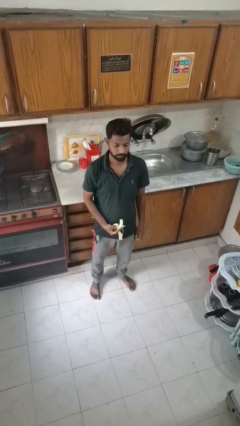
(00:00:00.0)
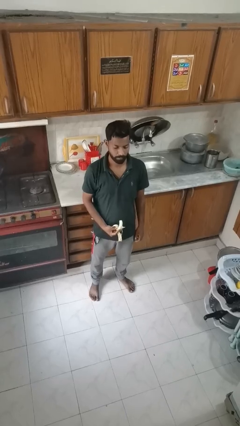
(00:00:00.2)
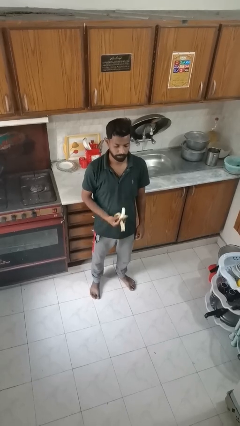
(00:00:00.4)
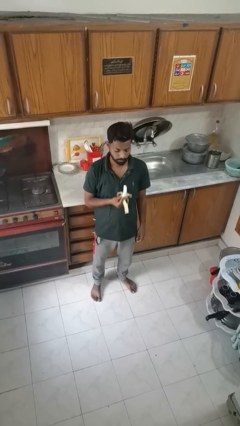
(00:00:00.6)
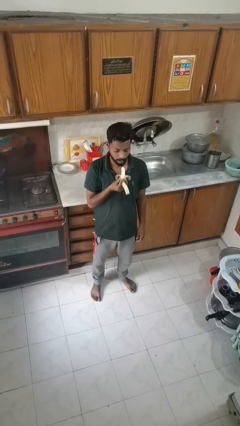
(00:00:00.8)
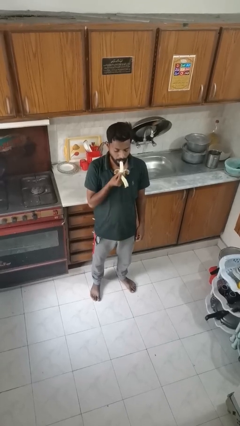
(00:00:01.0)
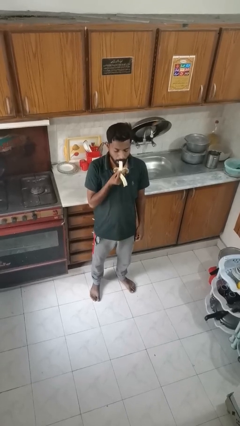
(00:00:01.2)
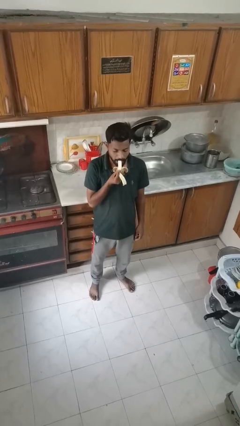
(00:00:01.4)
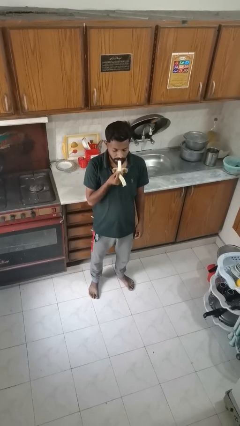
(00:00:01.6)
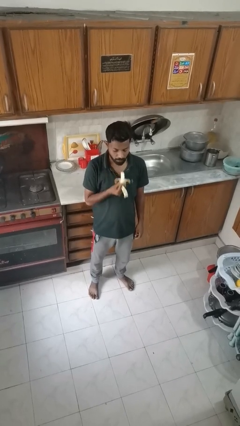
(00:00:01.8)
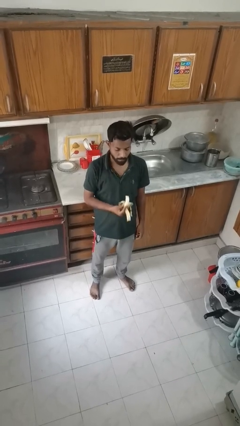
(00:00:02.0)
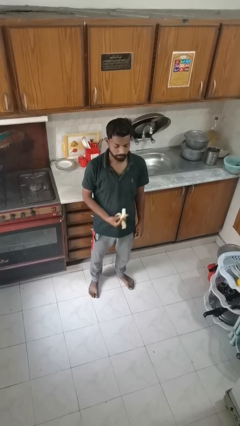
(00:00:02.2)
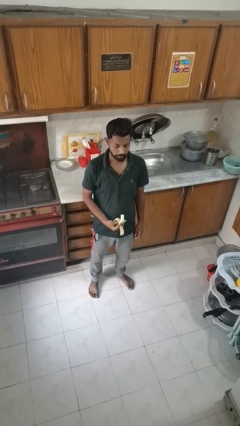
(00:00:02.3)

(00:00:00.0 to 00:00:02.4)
person eats banana

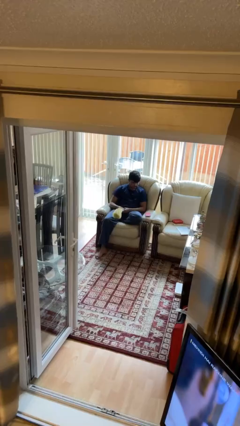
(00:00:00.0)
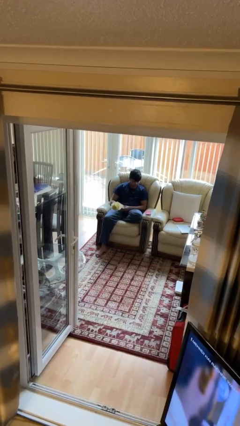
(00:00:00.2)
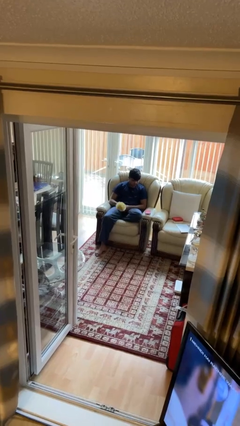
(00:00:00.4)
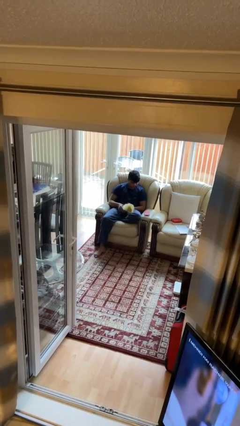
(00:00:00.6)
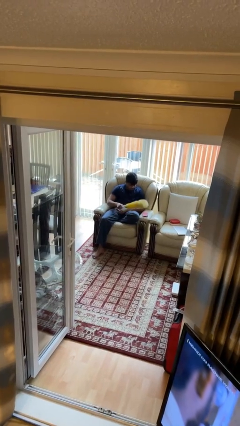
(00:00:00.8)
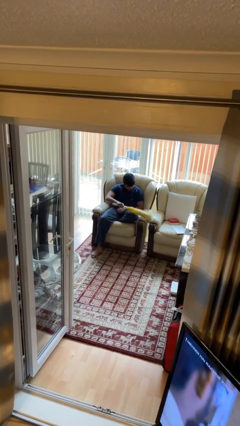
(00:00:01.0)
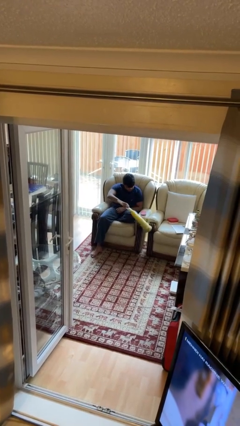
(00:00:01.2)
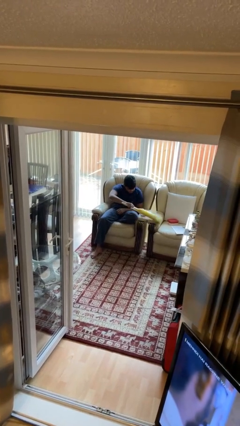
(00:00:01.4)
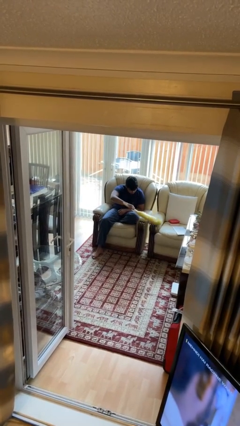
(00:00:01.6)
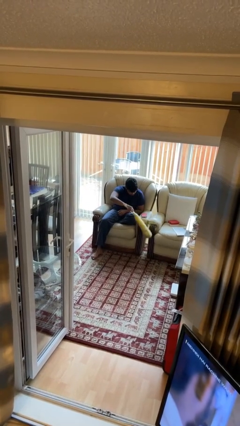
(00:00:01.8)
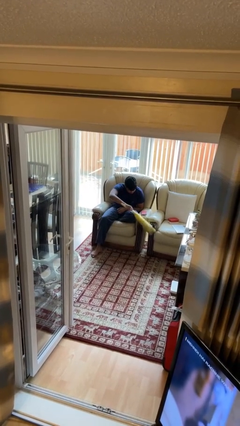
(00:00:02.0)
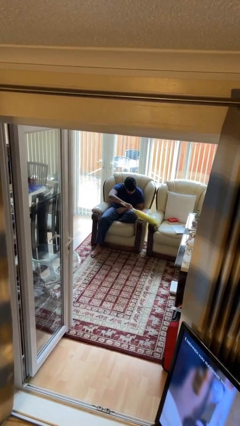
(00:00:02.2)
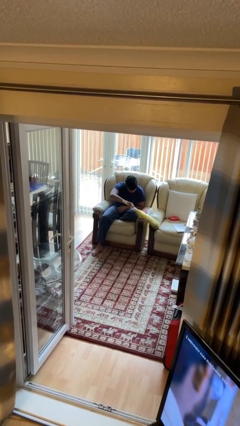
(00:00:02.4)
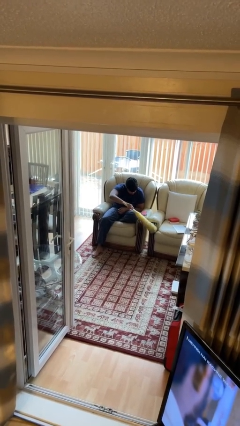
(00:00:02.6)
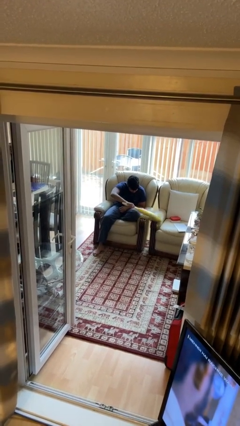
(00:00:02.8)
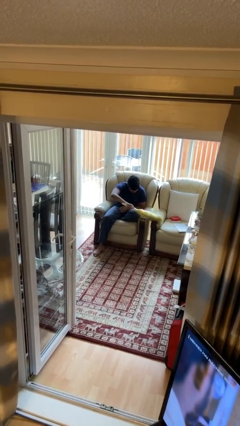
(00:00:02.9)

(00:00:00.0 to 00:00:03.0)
person dusts furniture

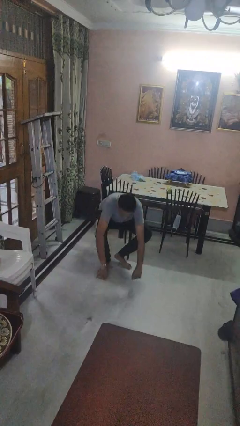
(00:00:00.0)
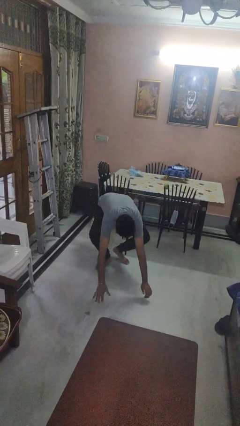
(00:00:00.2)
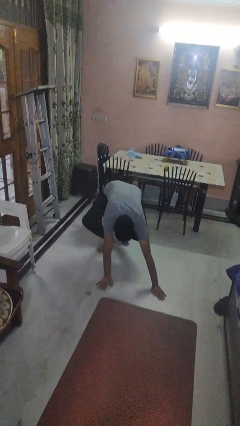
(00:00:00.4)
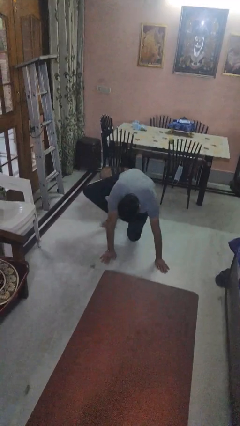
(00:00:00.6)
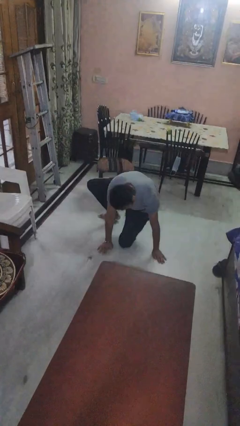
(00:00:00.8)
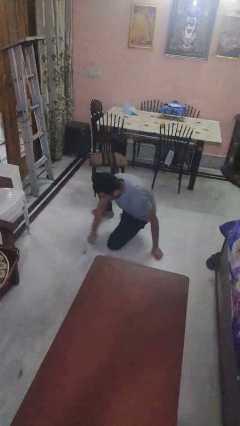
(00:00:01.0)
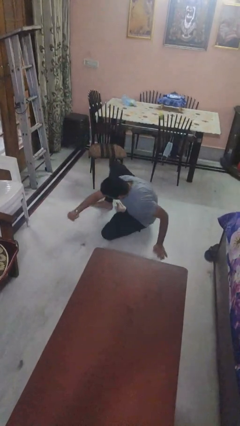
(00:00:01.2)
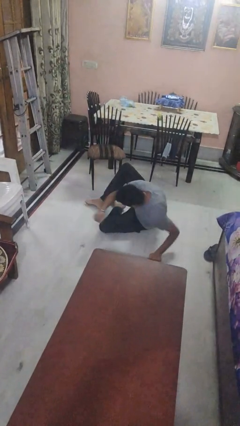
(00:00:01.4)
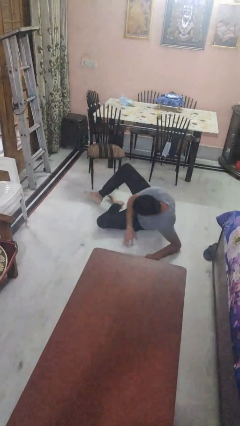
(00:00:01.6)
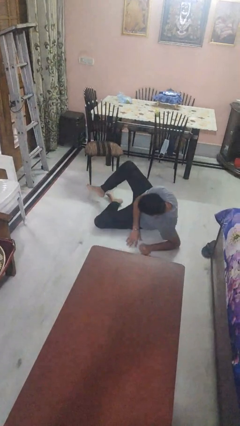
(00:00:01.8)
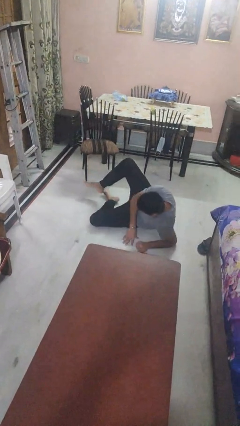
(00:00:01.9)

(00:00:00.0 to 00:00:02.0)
person falls while standing

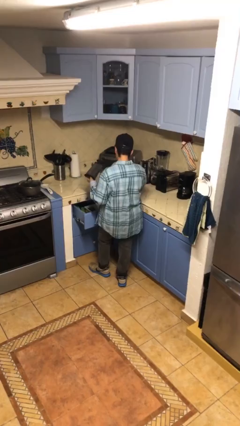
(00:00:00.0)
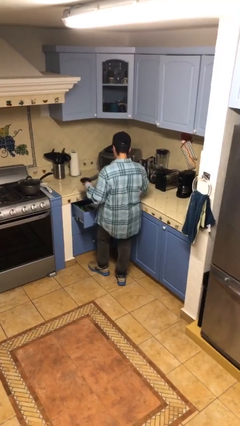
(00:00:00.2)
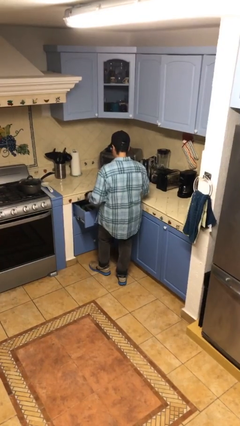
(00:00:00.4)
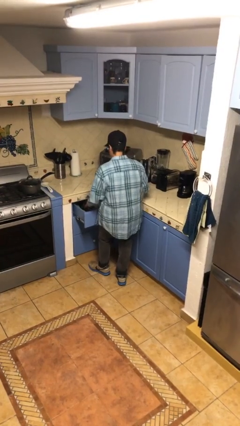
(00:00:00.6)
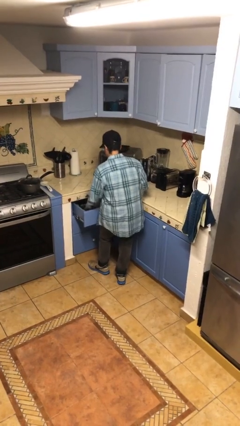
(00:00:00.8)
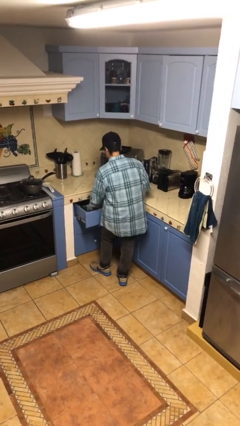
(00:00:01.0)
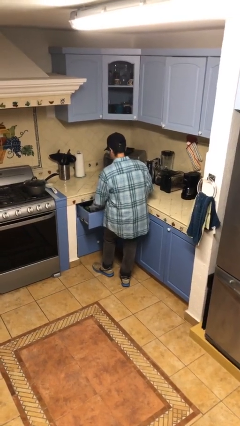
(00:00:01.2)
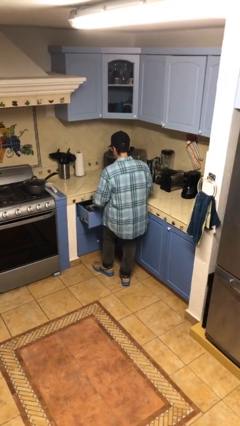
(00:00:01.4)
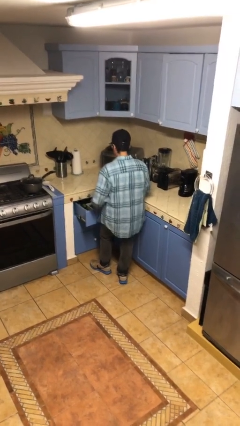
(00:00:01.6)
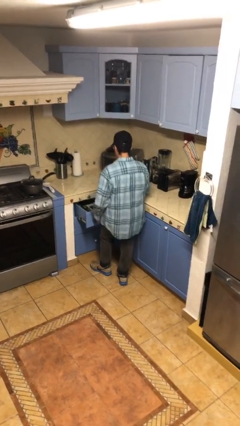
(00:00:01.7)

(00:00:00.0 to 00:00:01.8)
person puts object into kitchen drawer

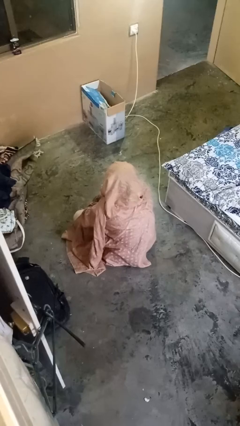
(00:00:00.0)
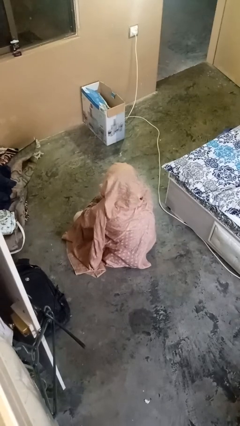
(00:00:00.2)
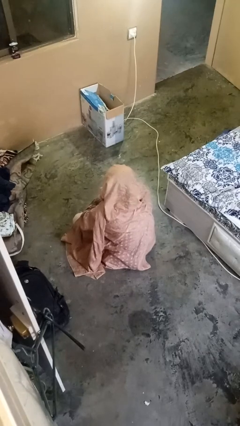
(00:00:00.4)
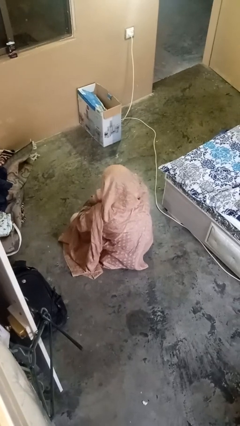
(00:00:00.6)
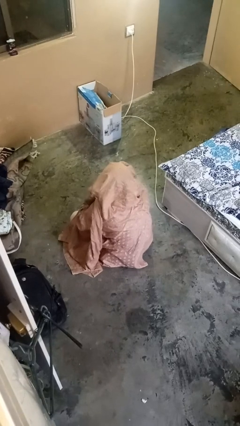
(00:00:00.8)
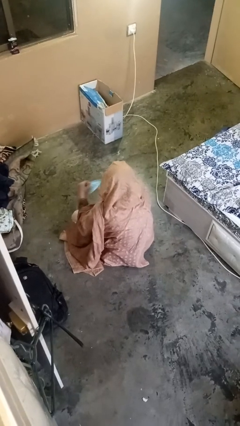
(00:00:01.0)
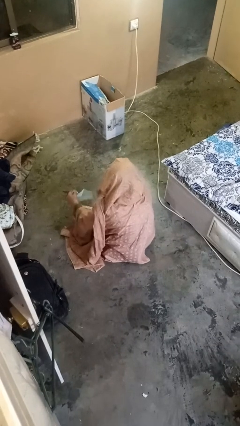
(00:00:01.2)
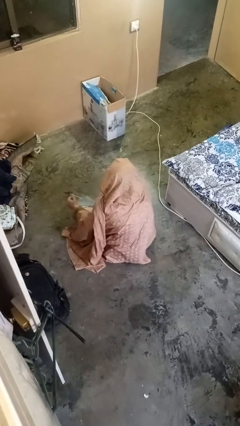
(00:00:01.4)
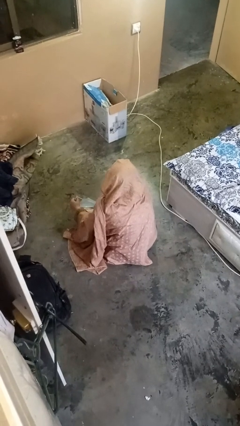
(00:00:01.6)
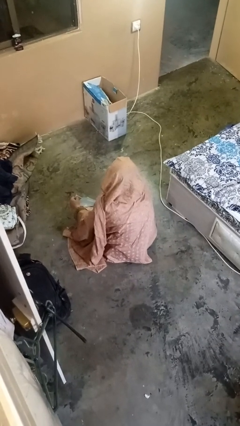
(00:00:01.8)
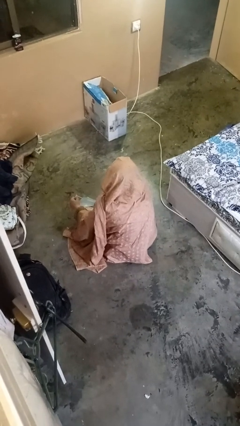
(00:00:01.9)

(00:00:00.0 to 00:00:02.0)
person takes off facemask

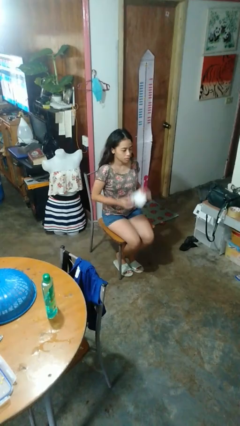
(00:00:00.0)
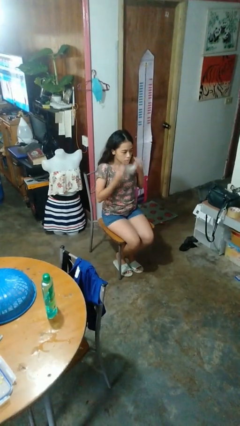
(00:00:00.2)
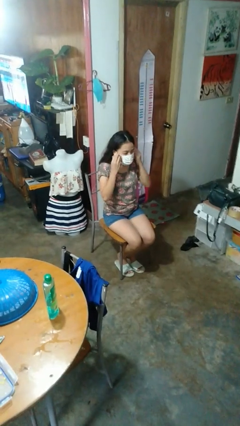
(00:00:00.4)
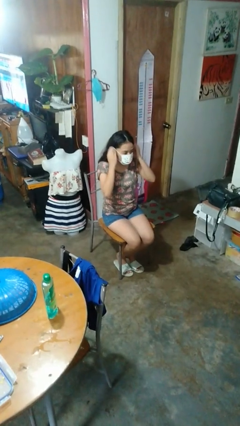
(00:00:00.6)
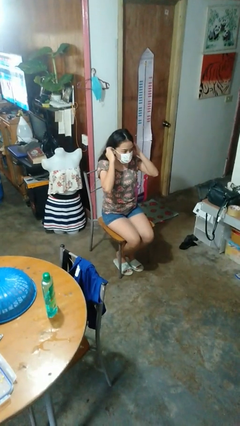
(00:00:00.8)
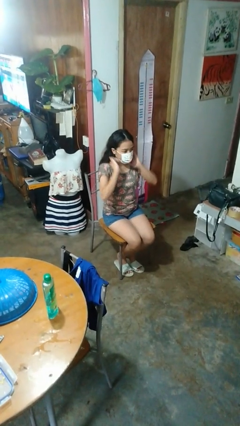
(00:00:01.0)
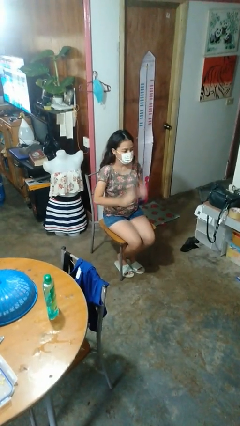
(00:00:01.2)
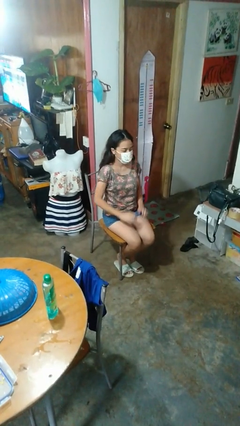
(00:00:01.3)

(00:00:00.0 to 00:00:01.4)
person closes mailbox

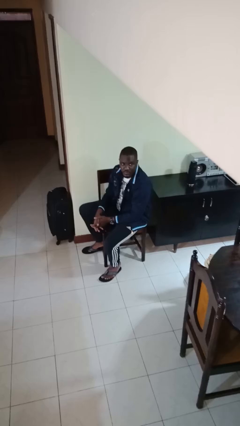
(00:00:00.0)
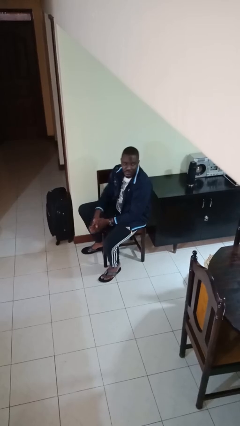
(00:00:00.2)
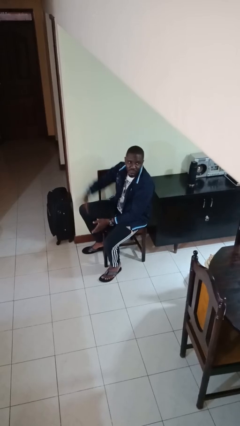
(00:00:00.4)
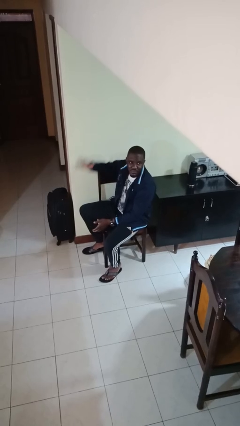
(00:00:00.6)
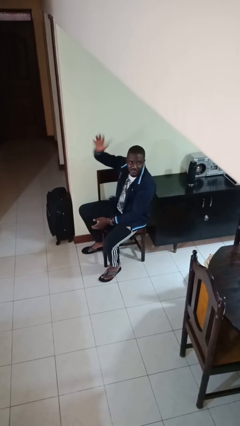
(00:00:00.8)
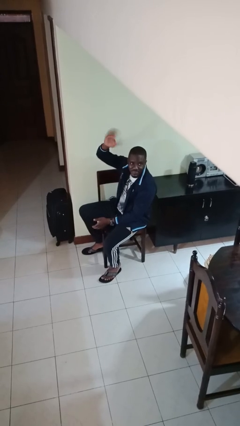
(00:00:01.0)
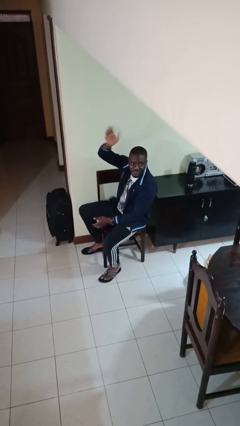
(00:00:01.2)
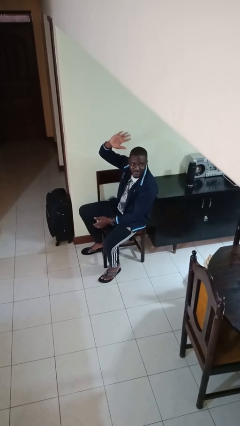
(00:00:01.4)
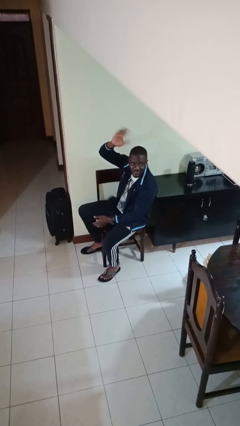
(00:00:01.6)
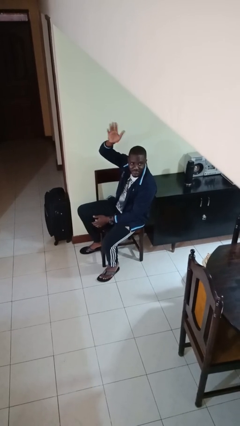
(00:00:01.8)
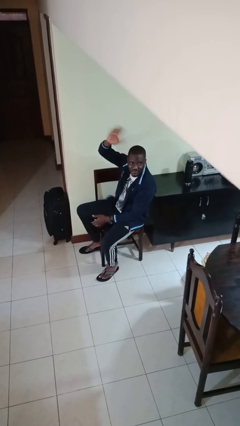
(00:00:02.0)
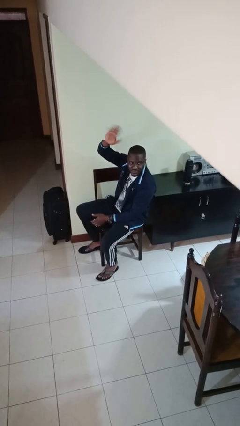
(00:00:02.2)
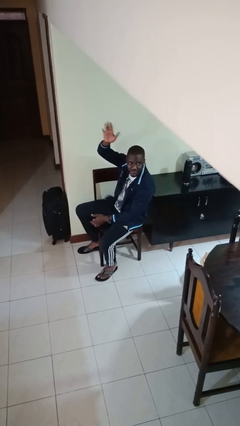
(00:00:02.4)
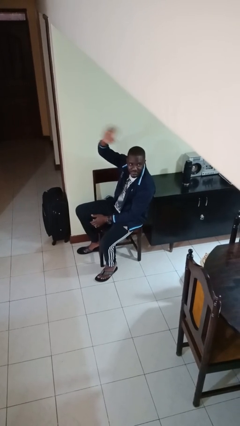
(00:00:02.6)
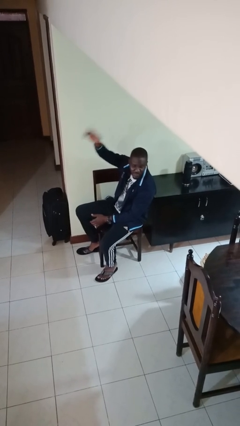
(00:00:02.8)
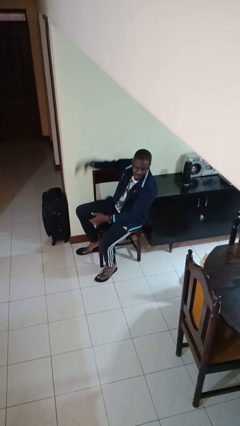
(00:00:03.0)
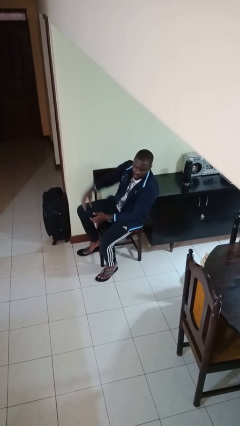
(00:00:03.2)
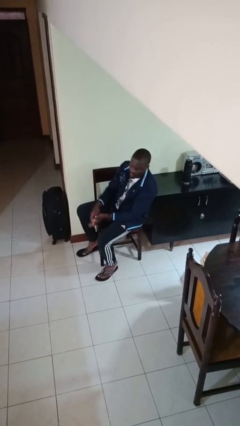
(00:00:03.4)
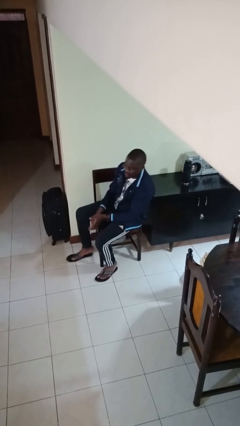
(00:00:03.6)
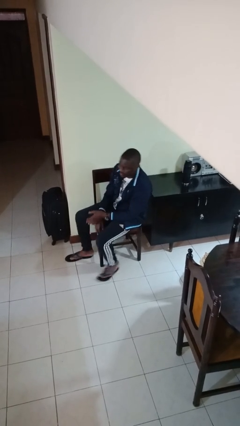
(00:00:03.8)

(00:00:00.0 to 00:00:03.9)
person waves at person
